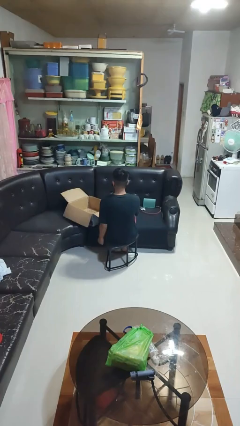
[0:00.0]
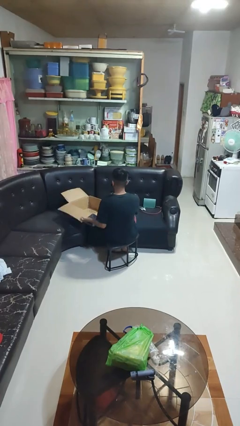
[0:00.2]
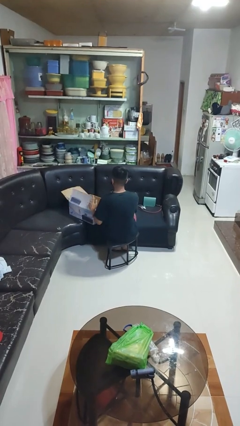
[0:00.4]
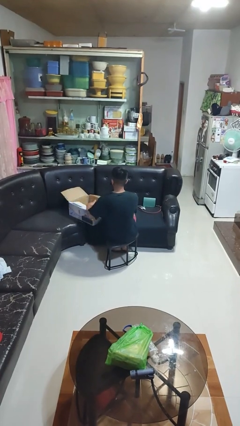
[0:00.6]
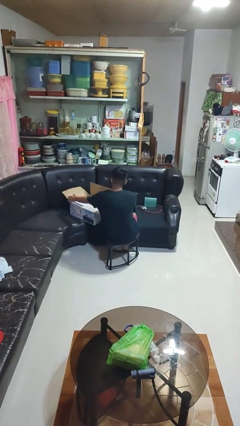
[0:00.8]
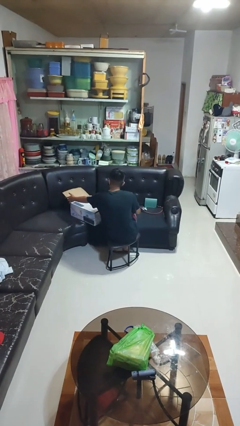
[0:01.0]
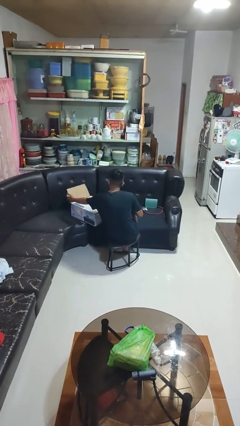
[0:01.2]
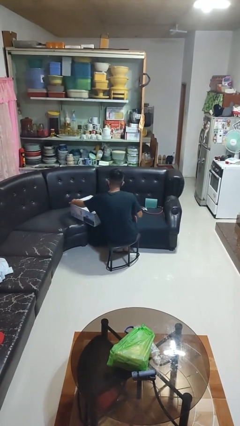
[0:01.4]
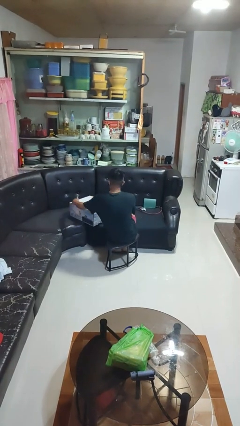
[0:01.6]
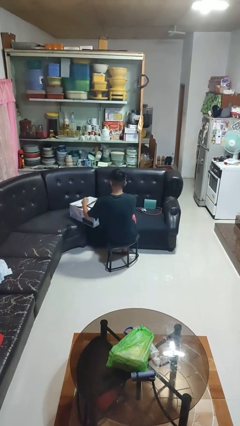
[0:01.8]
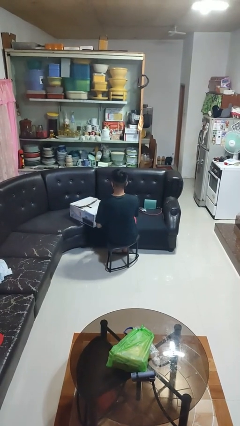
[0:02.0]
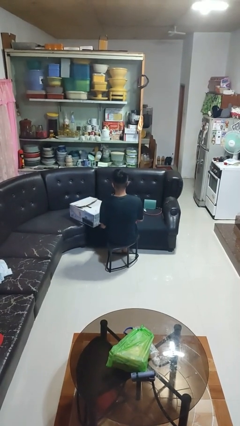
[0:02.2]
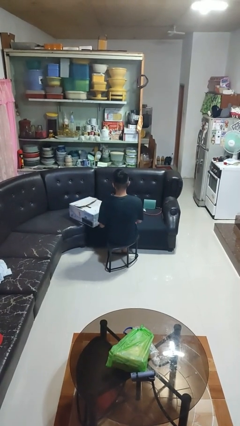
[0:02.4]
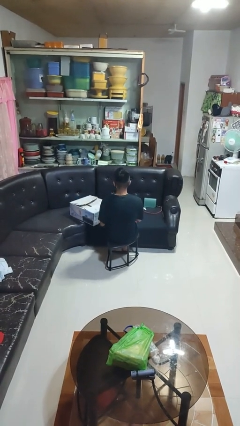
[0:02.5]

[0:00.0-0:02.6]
person closes box

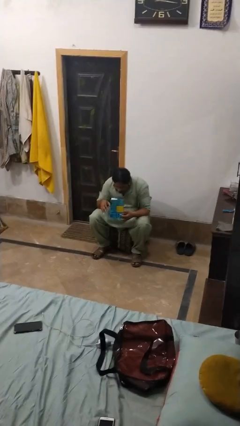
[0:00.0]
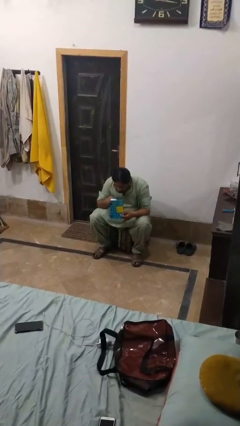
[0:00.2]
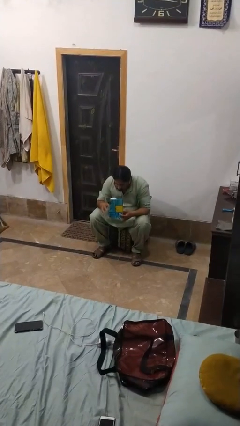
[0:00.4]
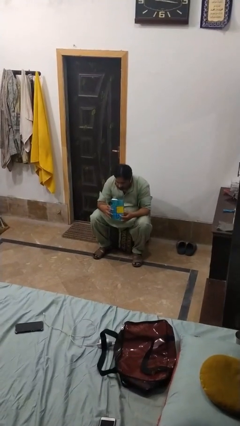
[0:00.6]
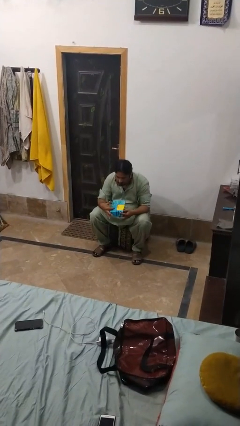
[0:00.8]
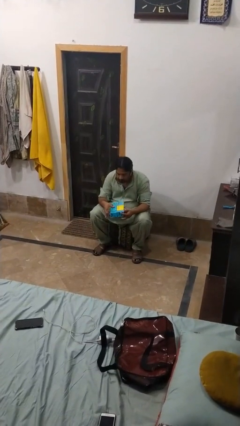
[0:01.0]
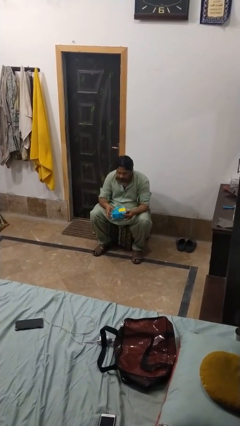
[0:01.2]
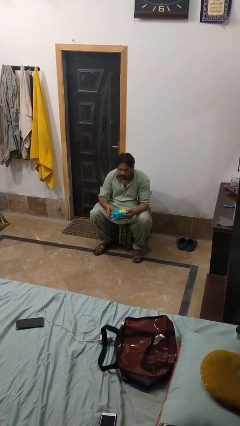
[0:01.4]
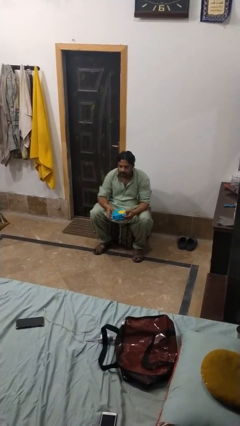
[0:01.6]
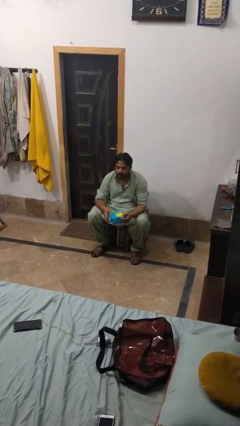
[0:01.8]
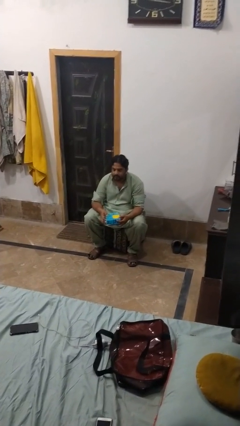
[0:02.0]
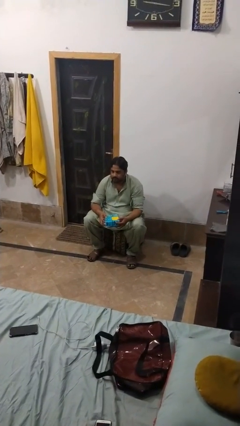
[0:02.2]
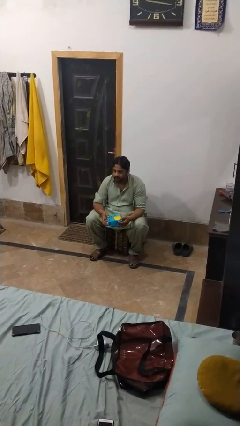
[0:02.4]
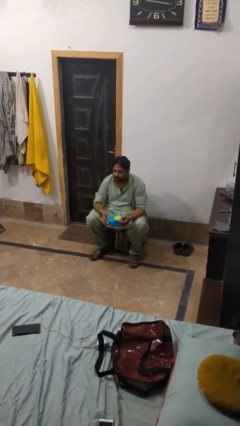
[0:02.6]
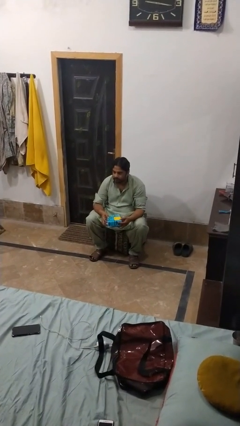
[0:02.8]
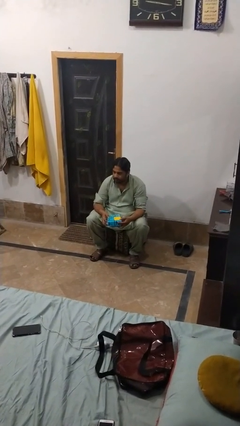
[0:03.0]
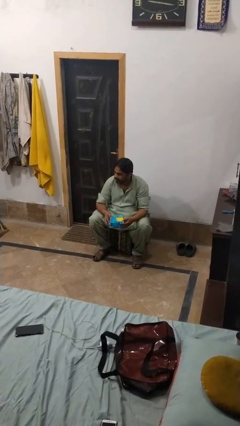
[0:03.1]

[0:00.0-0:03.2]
person closes jewelry box

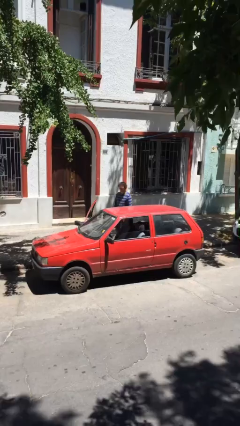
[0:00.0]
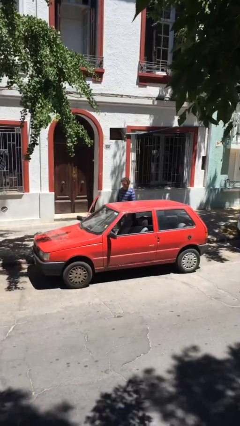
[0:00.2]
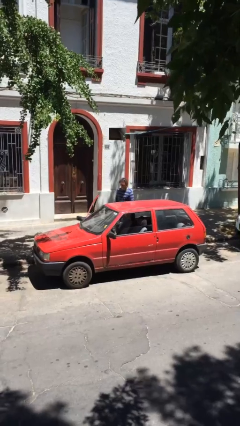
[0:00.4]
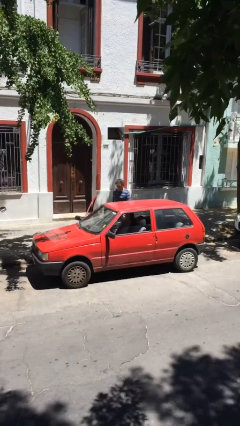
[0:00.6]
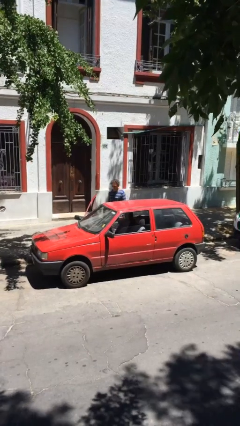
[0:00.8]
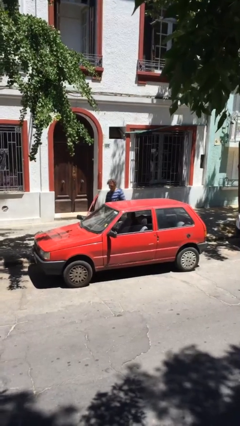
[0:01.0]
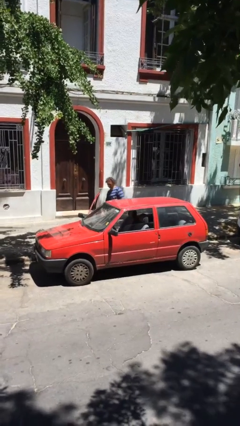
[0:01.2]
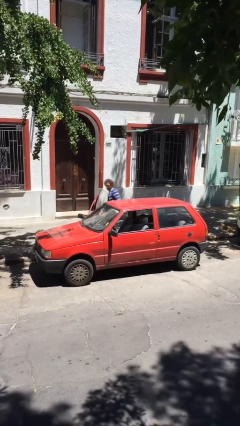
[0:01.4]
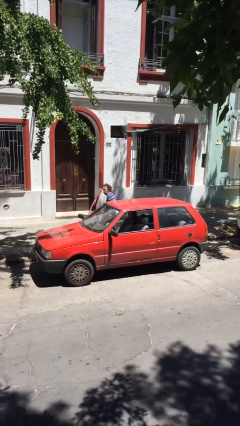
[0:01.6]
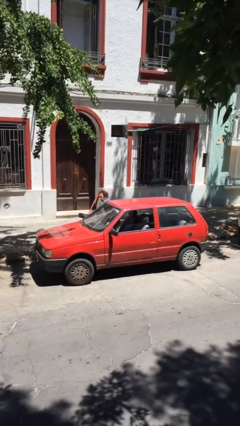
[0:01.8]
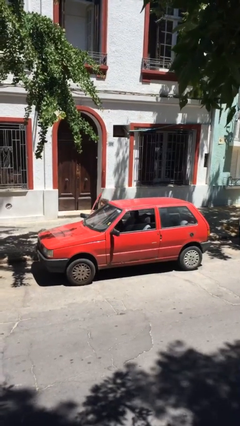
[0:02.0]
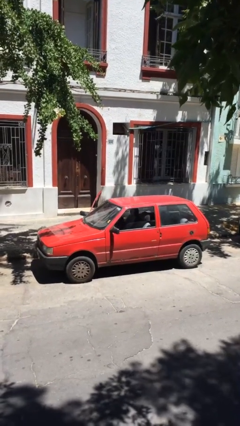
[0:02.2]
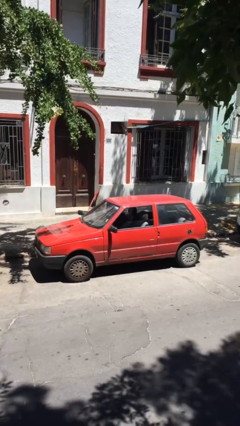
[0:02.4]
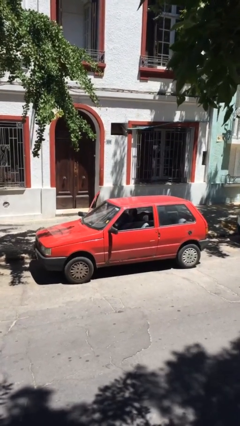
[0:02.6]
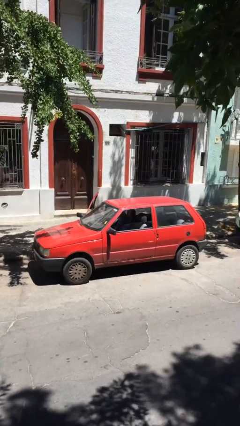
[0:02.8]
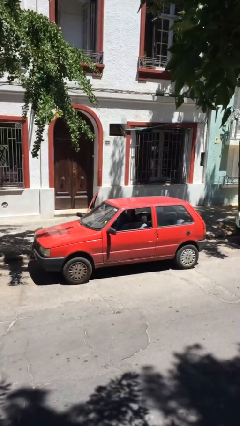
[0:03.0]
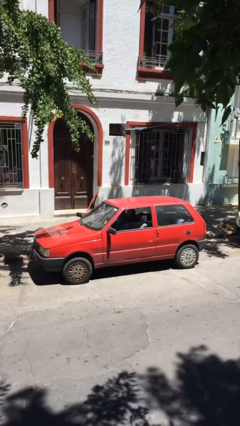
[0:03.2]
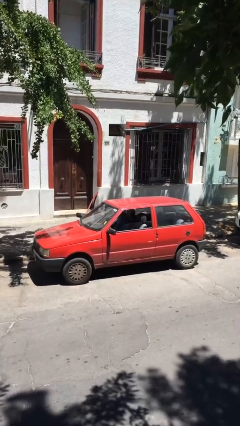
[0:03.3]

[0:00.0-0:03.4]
person enters car

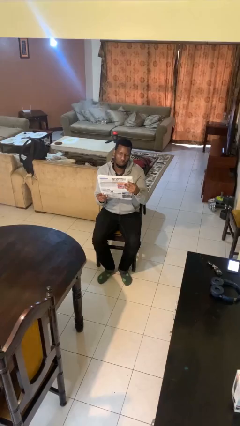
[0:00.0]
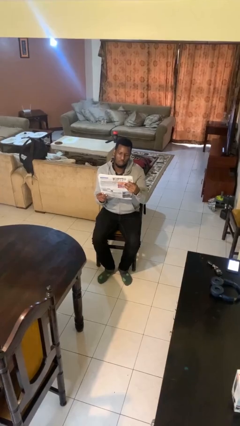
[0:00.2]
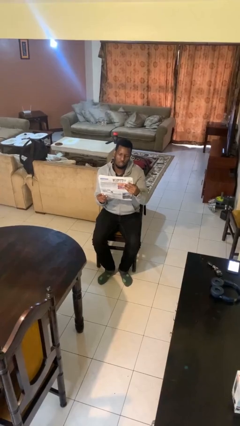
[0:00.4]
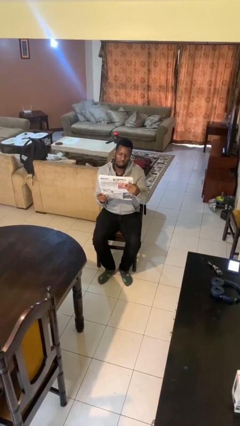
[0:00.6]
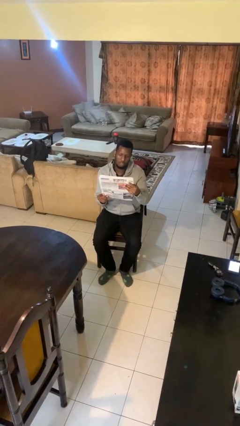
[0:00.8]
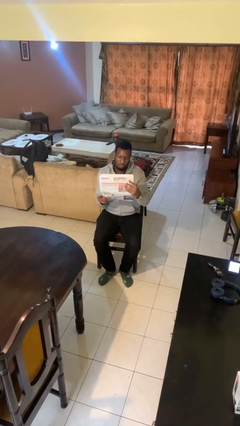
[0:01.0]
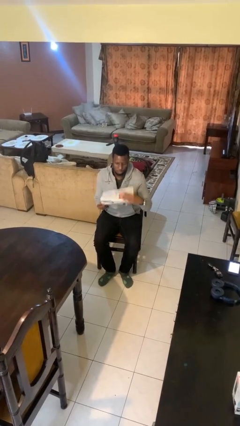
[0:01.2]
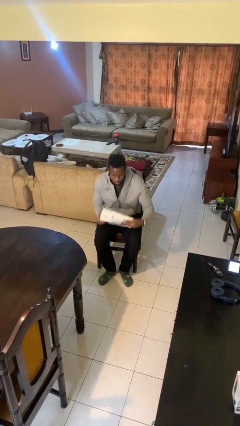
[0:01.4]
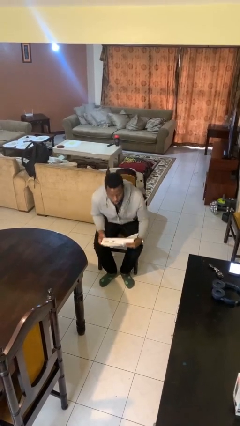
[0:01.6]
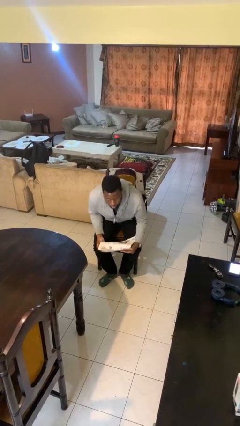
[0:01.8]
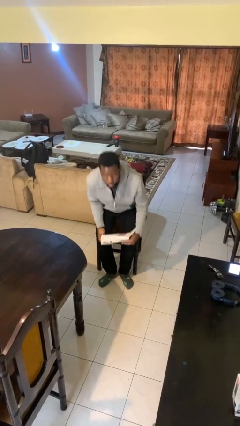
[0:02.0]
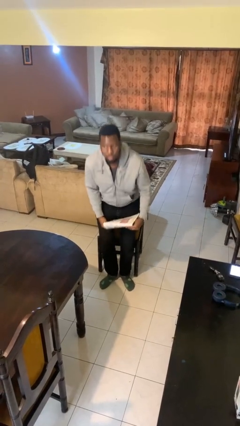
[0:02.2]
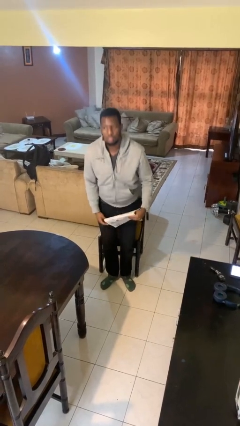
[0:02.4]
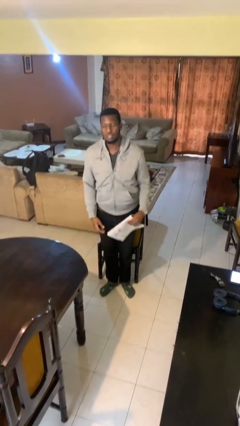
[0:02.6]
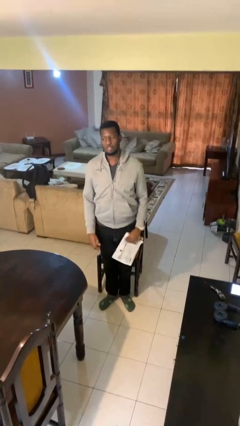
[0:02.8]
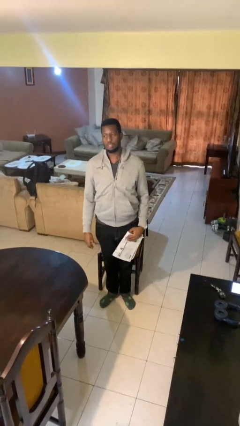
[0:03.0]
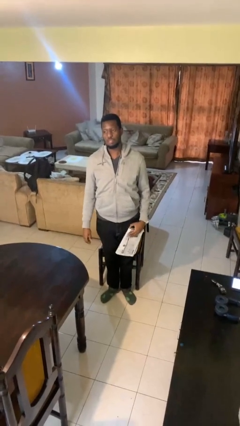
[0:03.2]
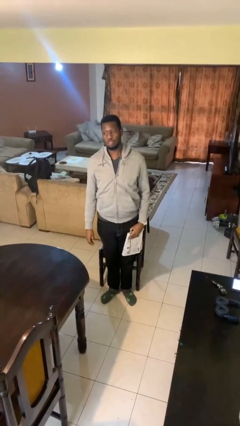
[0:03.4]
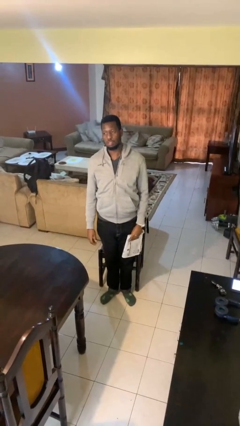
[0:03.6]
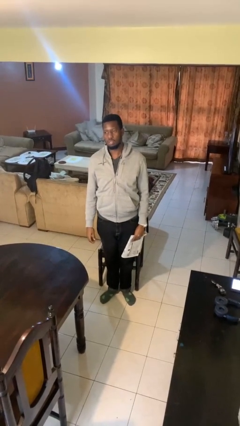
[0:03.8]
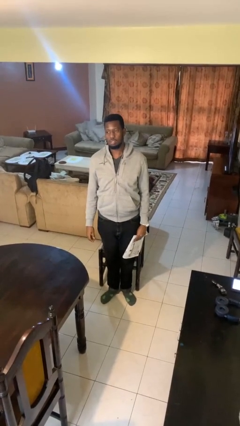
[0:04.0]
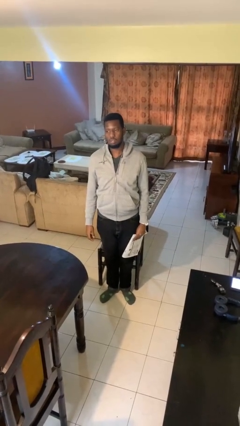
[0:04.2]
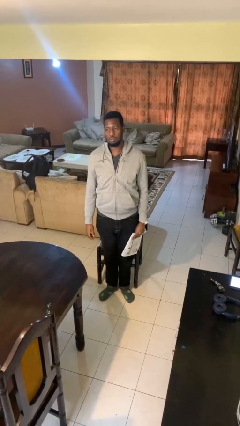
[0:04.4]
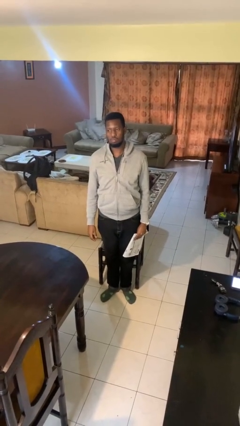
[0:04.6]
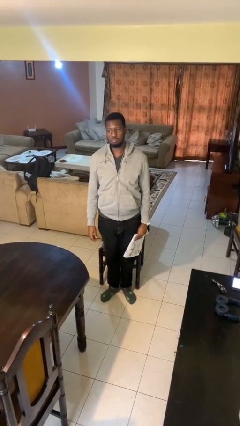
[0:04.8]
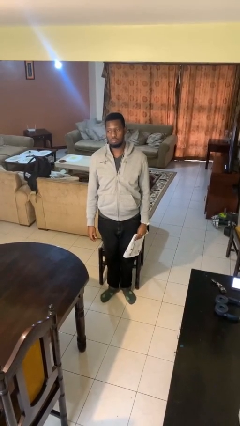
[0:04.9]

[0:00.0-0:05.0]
person stands up

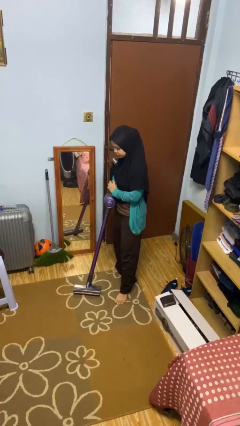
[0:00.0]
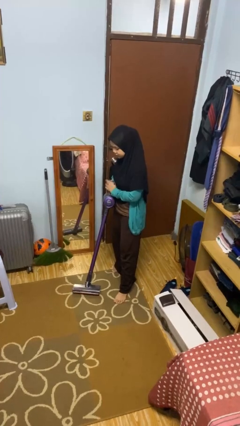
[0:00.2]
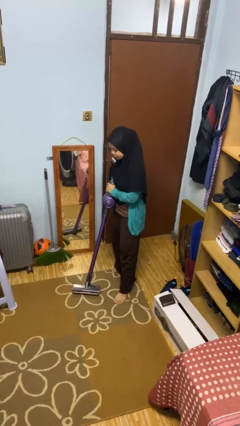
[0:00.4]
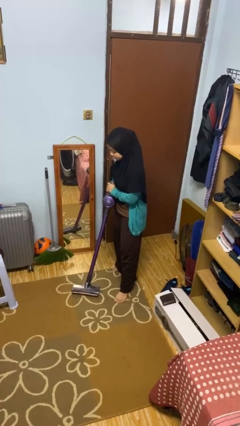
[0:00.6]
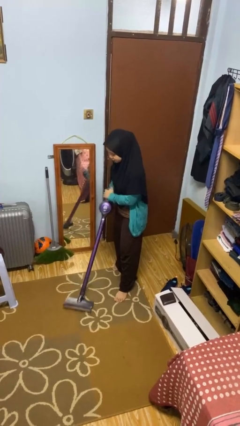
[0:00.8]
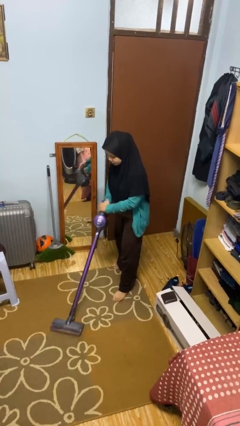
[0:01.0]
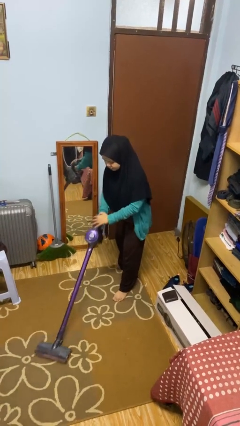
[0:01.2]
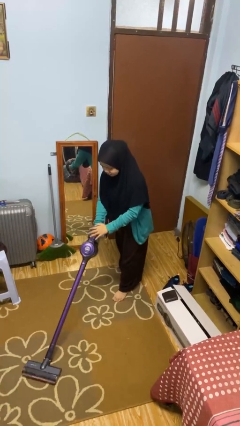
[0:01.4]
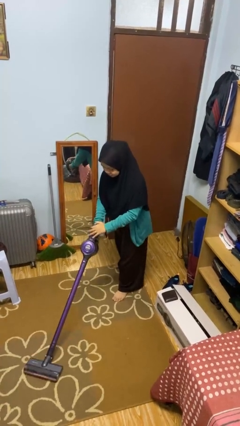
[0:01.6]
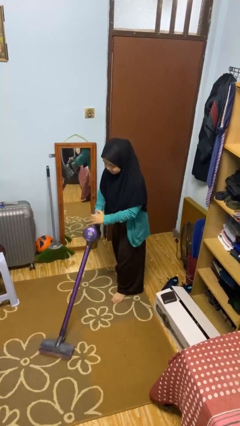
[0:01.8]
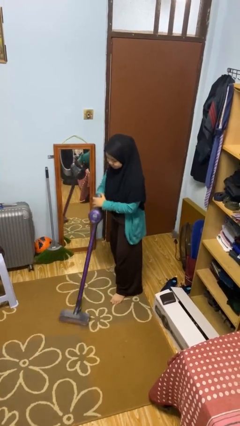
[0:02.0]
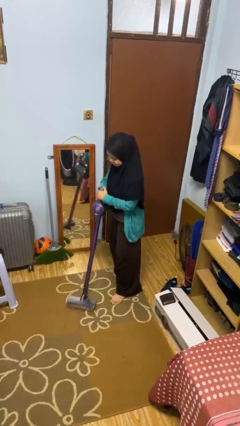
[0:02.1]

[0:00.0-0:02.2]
person vacuums carpet

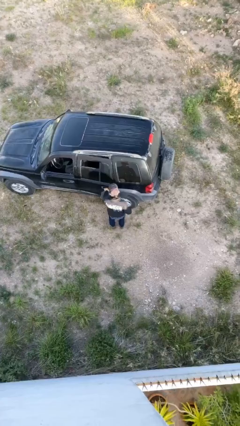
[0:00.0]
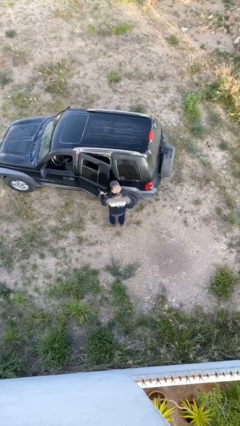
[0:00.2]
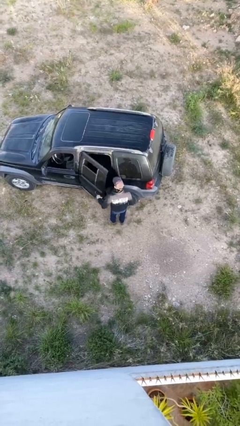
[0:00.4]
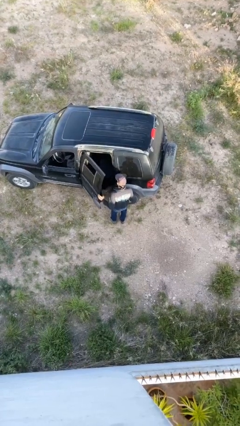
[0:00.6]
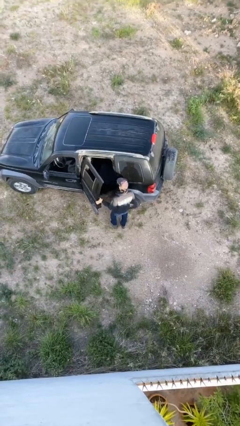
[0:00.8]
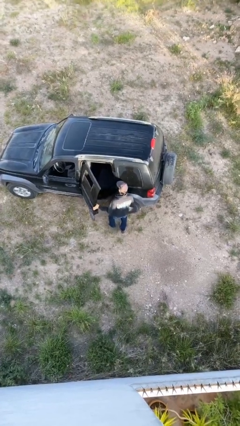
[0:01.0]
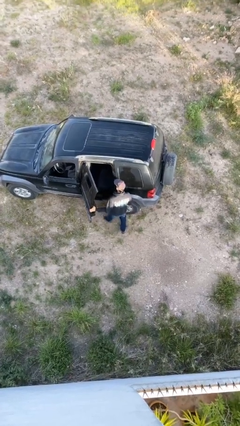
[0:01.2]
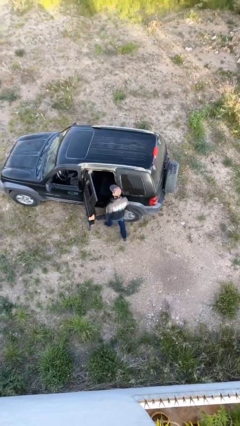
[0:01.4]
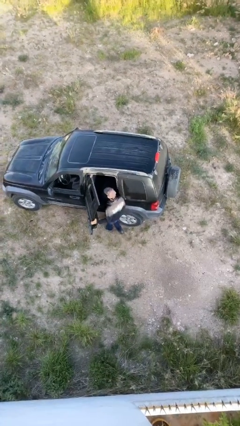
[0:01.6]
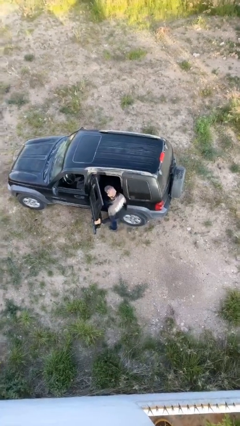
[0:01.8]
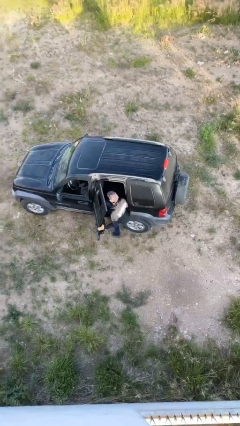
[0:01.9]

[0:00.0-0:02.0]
person opens car door
